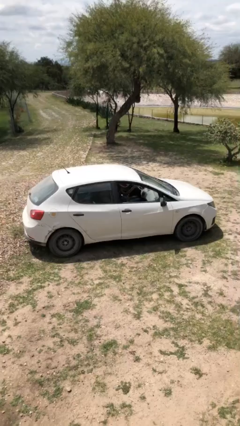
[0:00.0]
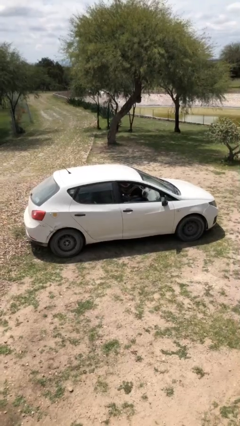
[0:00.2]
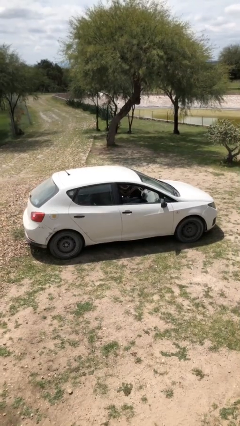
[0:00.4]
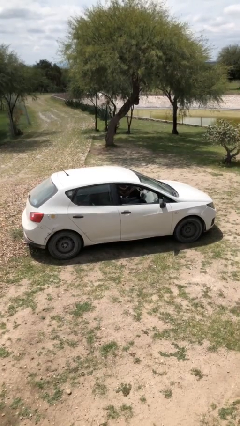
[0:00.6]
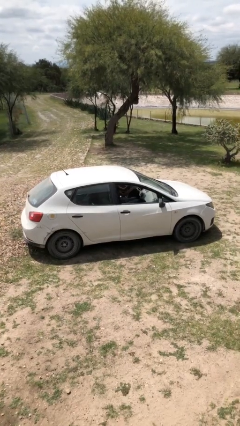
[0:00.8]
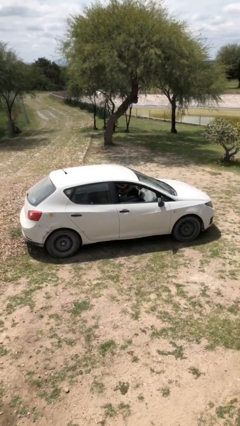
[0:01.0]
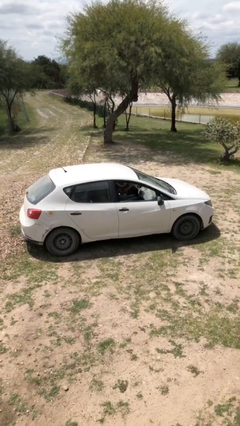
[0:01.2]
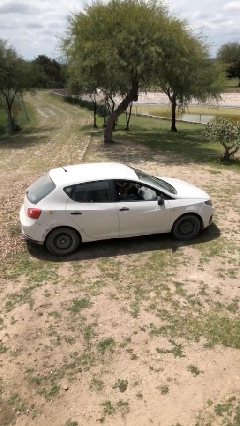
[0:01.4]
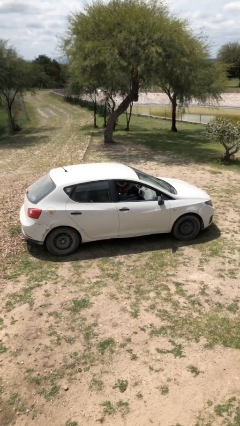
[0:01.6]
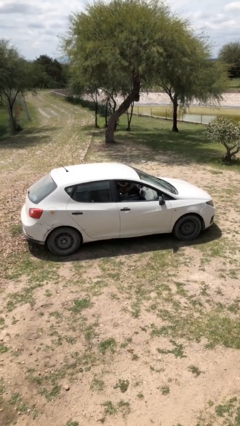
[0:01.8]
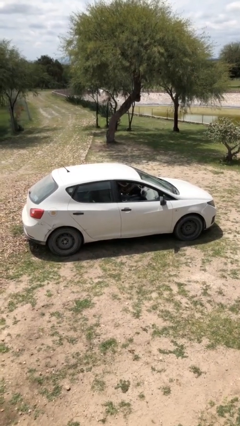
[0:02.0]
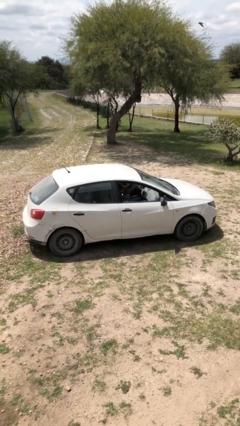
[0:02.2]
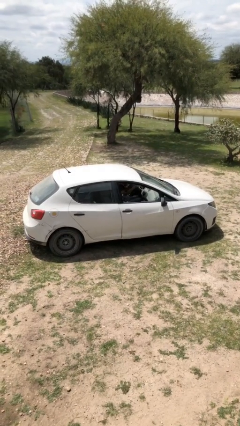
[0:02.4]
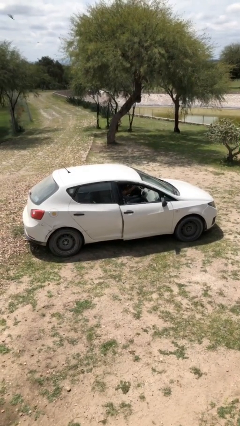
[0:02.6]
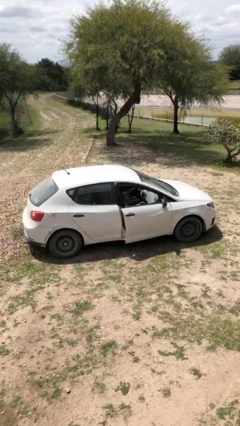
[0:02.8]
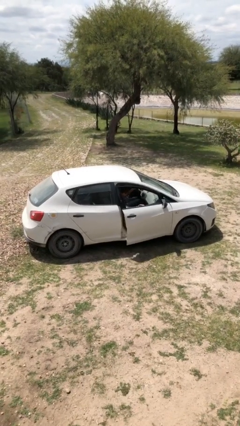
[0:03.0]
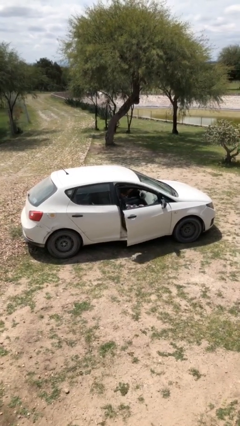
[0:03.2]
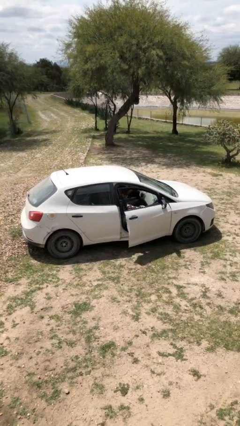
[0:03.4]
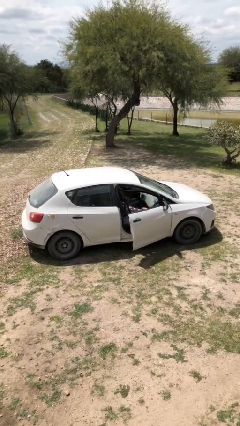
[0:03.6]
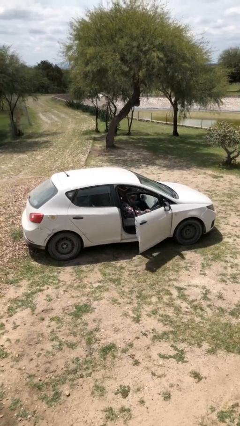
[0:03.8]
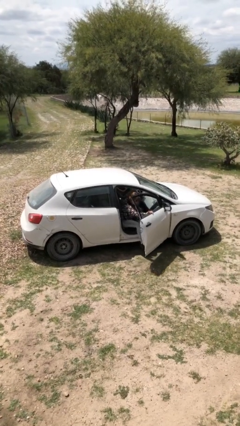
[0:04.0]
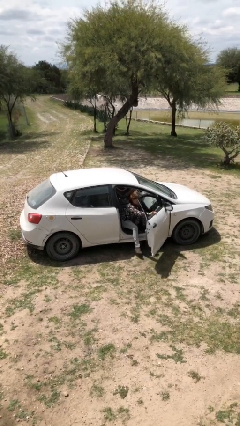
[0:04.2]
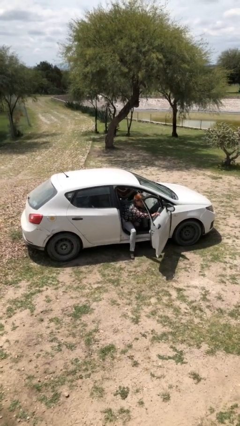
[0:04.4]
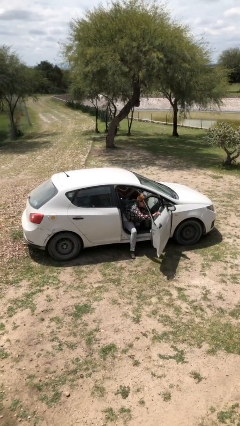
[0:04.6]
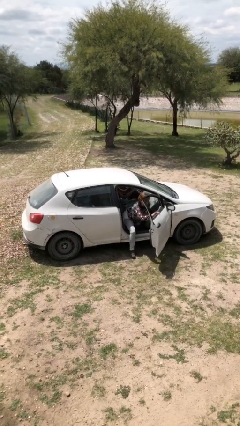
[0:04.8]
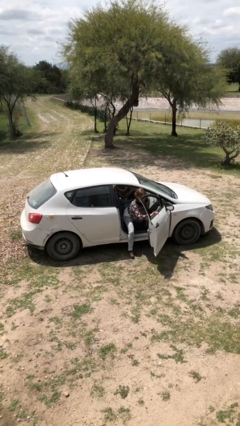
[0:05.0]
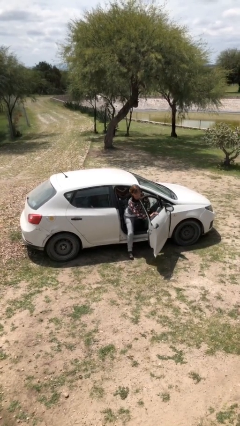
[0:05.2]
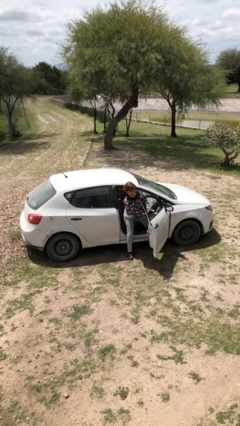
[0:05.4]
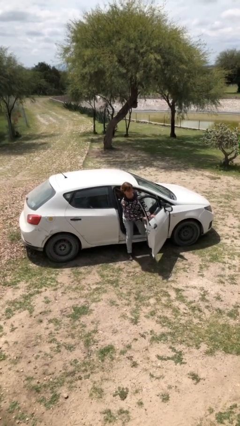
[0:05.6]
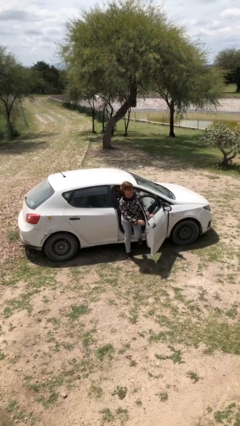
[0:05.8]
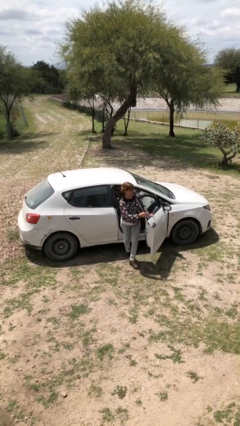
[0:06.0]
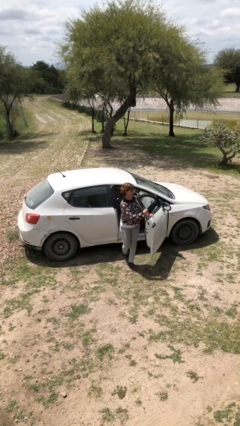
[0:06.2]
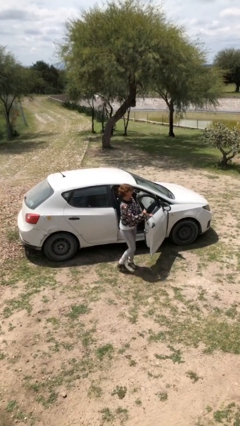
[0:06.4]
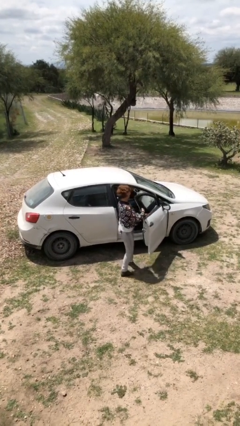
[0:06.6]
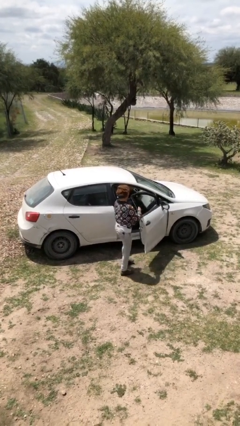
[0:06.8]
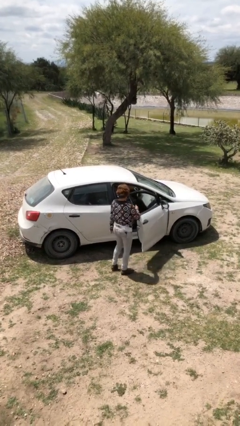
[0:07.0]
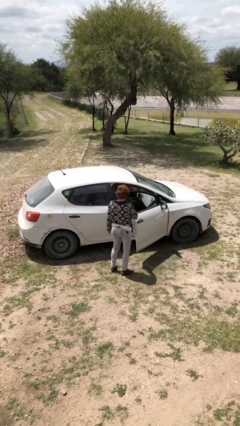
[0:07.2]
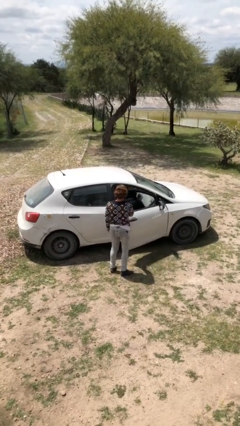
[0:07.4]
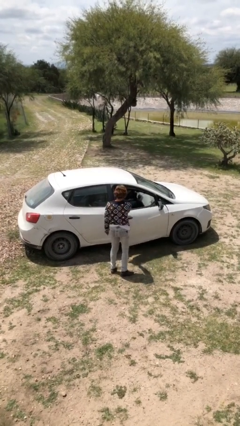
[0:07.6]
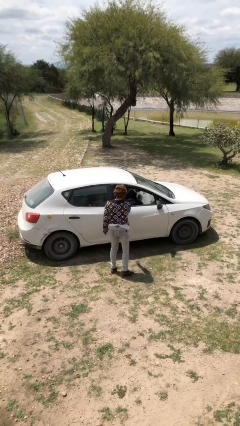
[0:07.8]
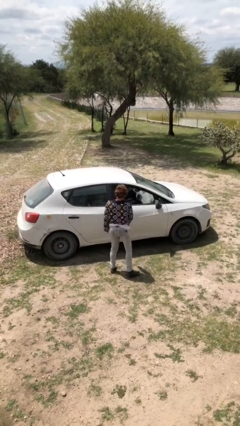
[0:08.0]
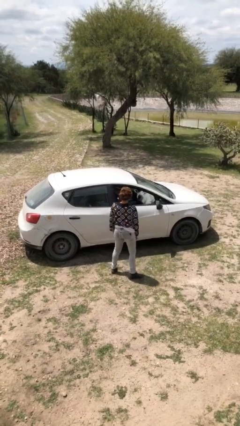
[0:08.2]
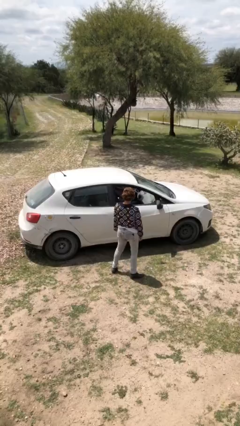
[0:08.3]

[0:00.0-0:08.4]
car drops off person

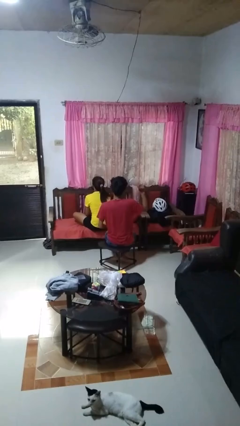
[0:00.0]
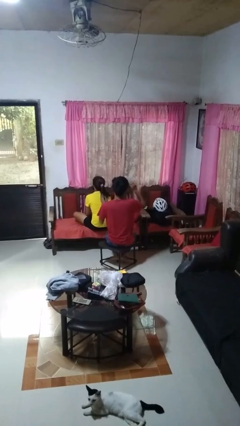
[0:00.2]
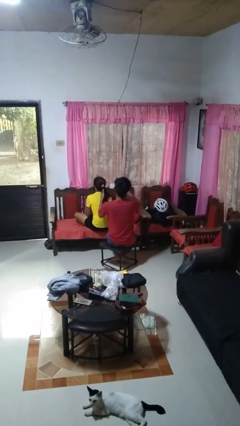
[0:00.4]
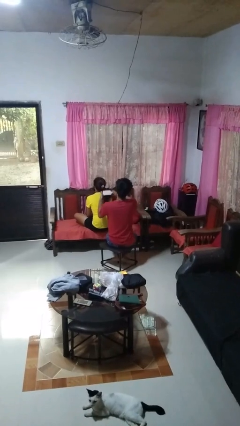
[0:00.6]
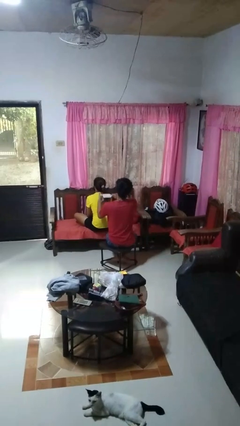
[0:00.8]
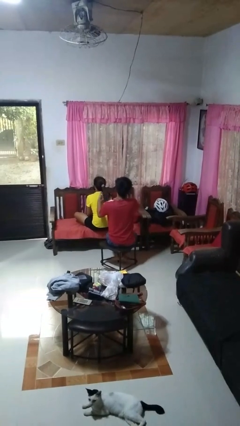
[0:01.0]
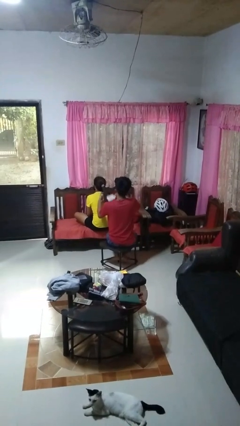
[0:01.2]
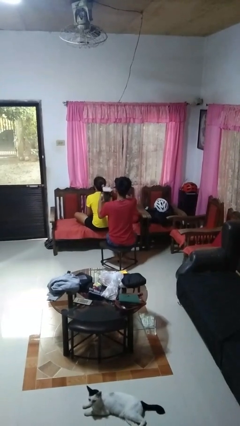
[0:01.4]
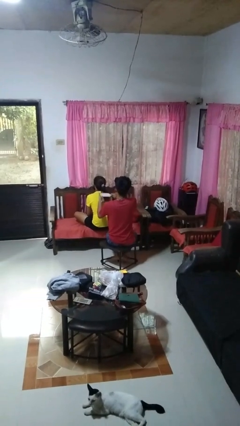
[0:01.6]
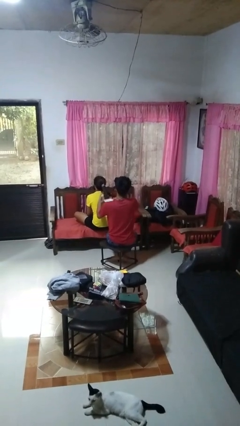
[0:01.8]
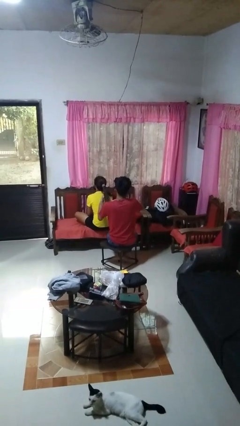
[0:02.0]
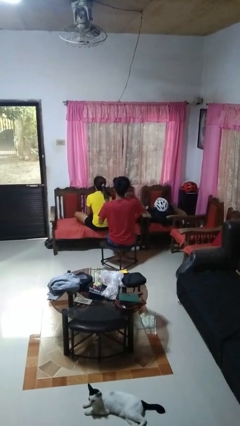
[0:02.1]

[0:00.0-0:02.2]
person brushes hair of person

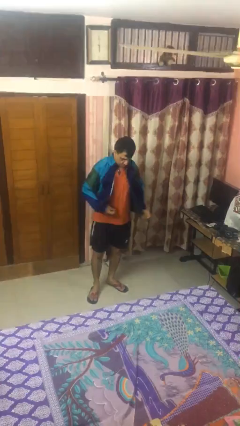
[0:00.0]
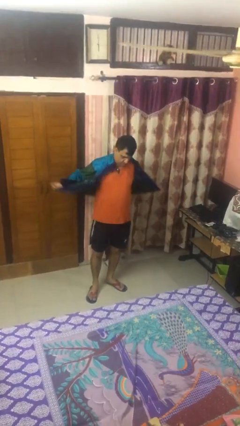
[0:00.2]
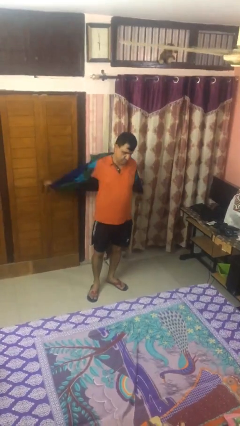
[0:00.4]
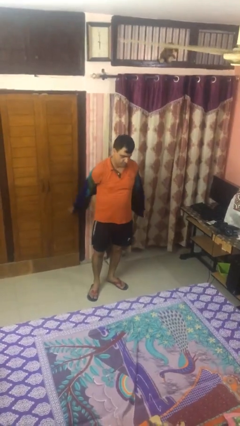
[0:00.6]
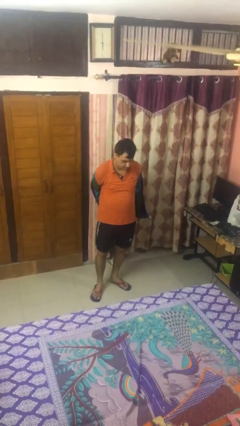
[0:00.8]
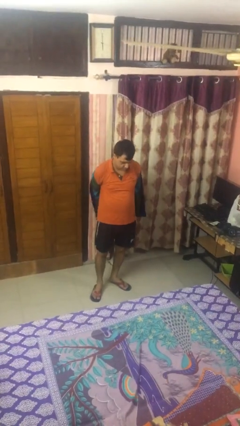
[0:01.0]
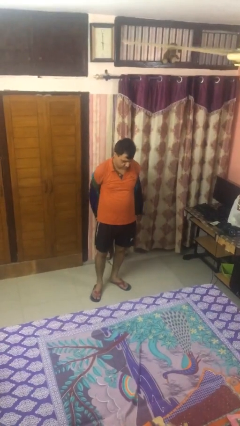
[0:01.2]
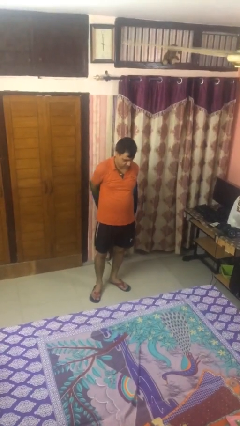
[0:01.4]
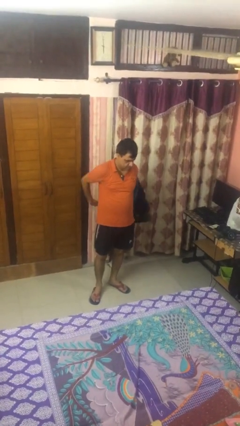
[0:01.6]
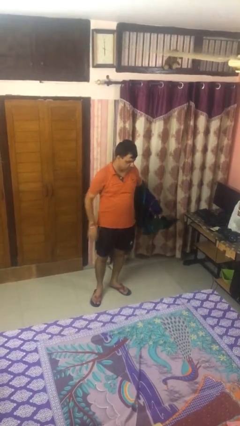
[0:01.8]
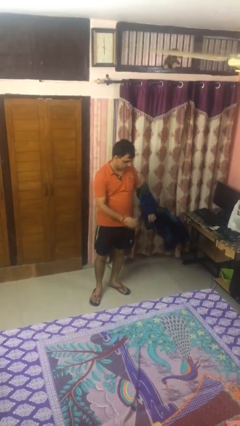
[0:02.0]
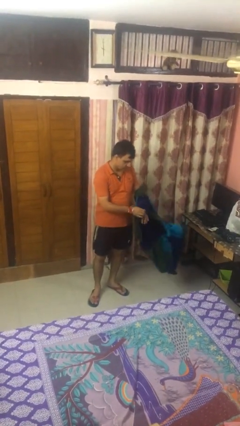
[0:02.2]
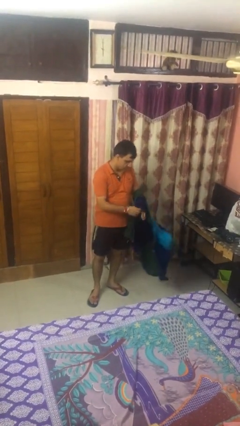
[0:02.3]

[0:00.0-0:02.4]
person takes off jacket

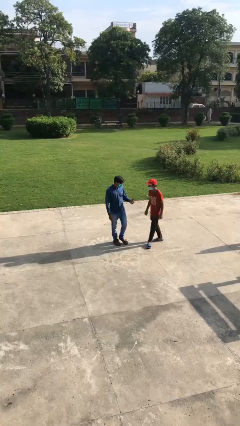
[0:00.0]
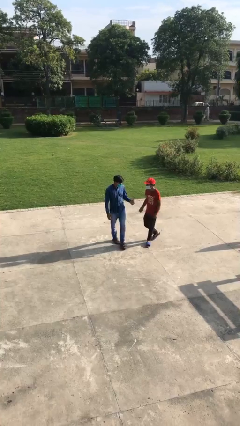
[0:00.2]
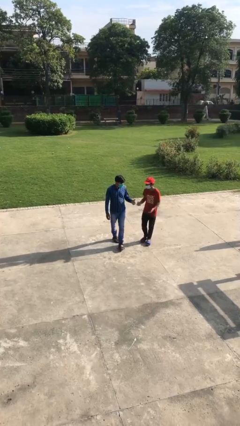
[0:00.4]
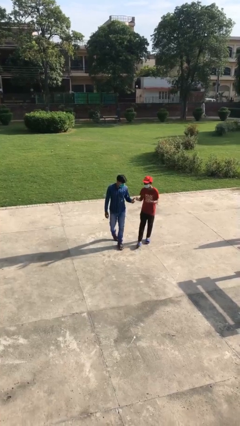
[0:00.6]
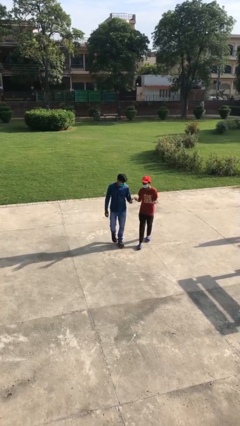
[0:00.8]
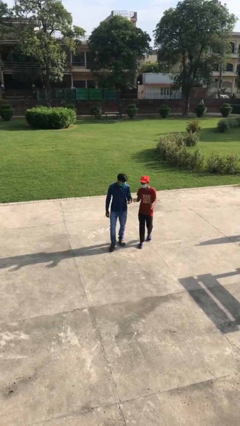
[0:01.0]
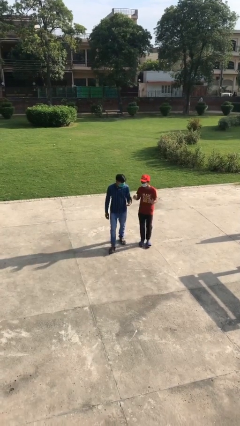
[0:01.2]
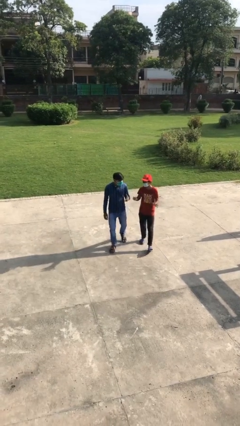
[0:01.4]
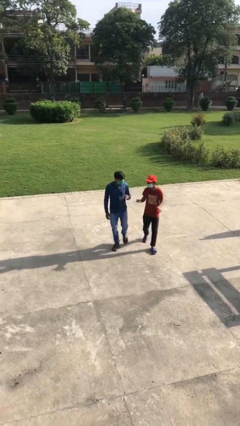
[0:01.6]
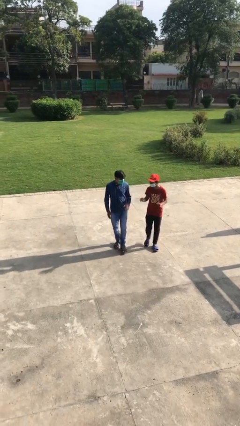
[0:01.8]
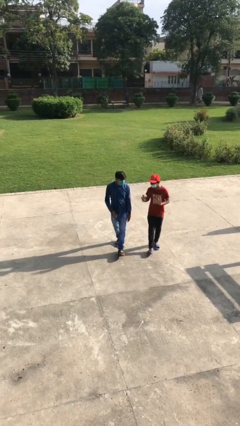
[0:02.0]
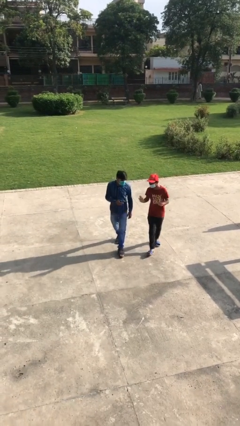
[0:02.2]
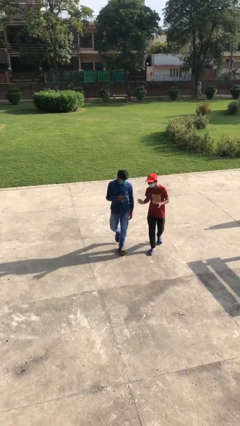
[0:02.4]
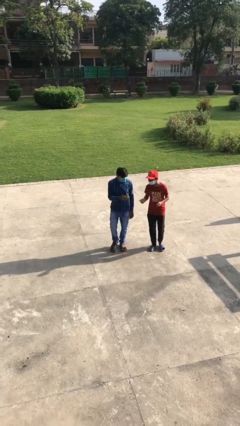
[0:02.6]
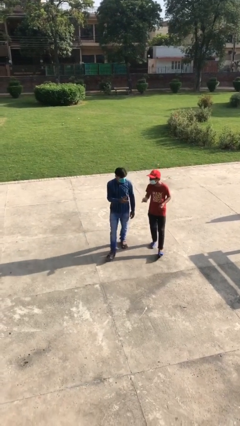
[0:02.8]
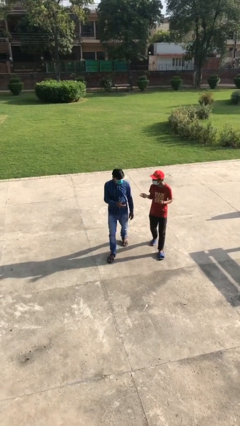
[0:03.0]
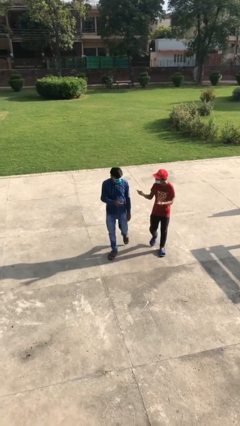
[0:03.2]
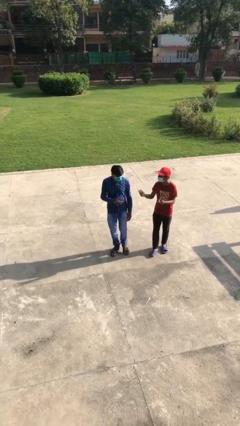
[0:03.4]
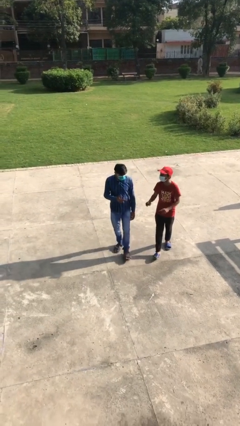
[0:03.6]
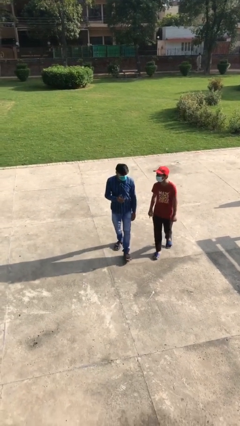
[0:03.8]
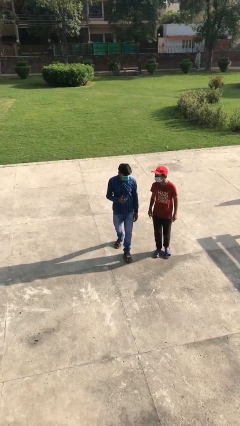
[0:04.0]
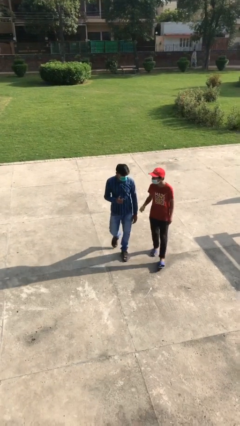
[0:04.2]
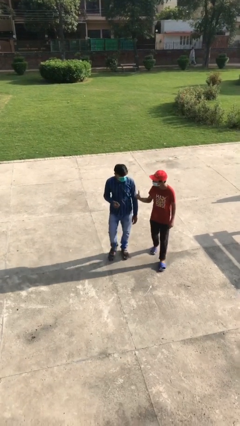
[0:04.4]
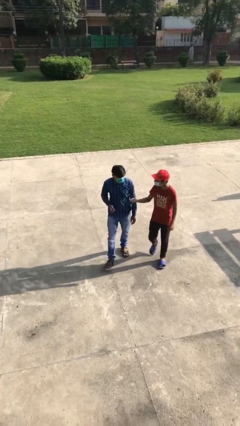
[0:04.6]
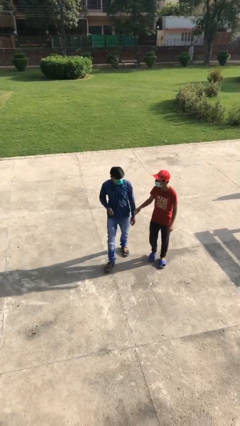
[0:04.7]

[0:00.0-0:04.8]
person talks to person

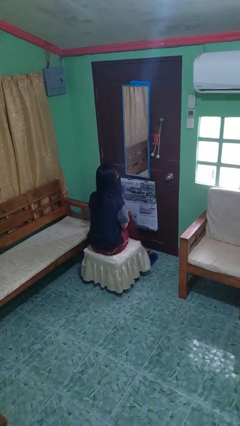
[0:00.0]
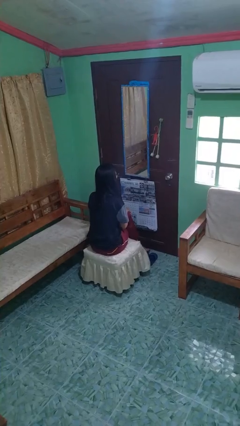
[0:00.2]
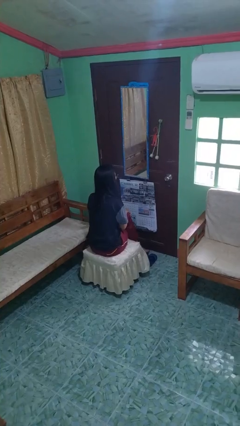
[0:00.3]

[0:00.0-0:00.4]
person gestures swipe right
